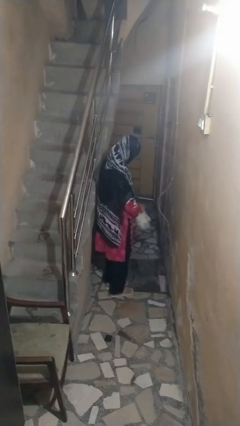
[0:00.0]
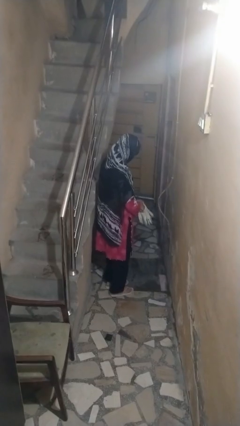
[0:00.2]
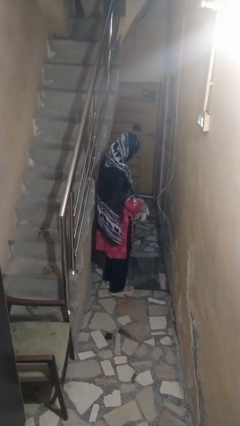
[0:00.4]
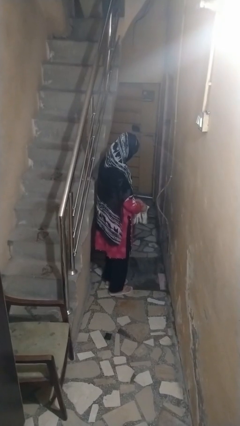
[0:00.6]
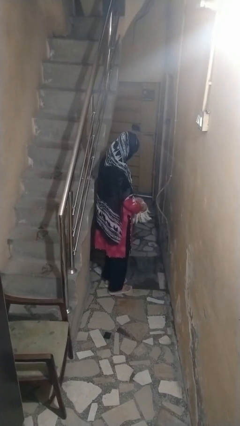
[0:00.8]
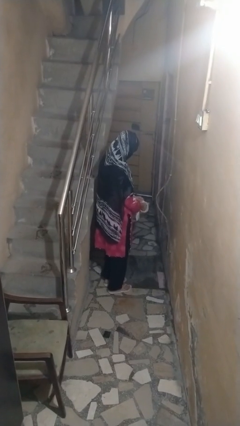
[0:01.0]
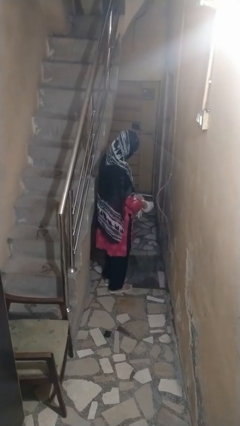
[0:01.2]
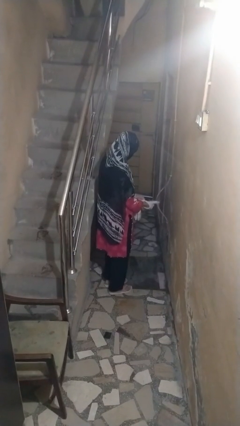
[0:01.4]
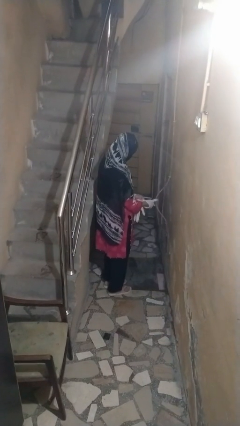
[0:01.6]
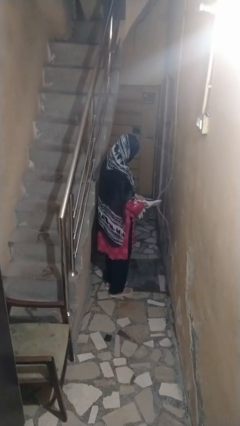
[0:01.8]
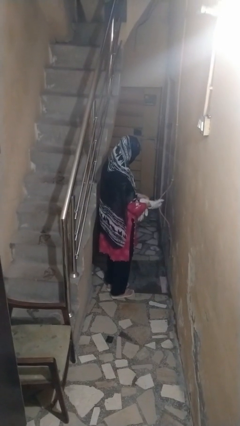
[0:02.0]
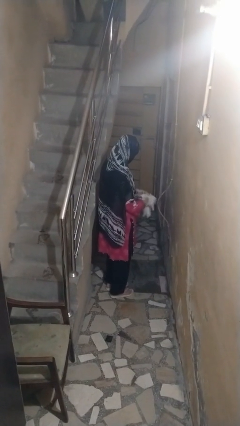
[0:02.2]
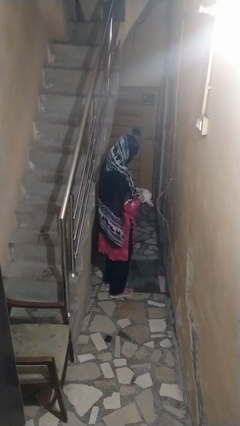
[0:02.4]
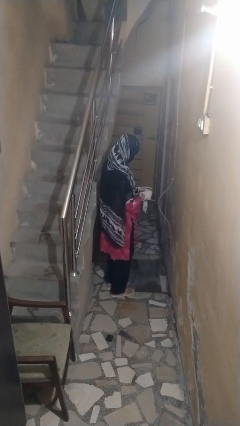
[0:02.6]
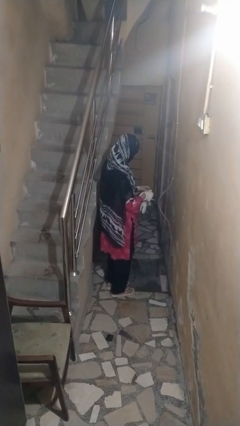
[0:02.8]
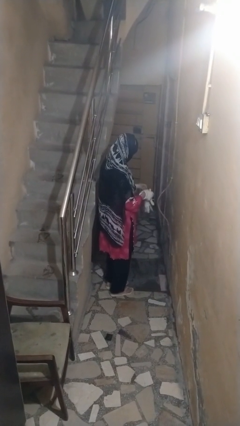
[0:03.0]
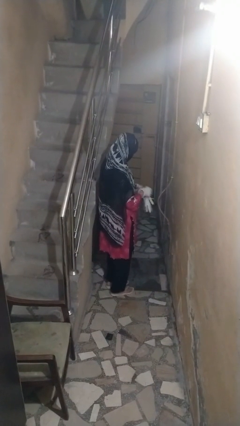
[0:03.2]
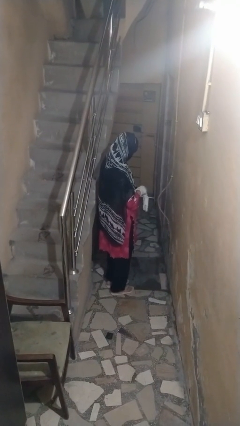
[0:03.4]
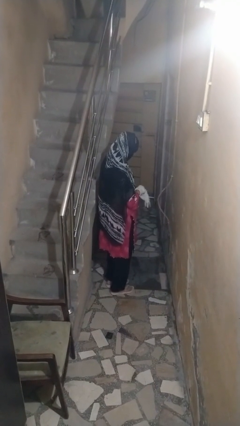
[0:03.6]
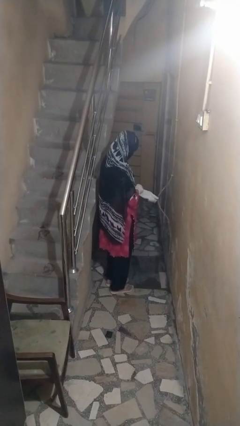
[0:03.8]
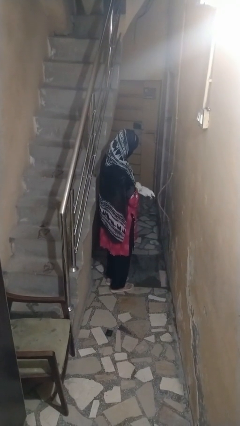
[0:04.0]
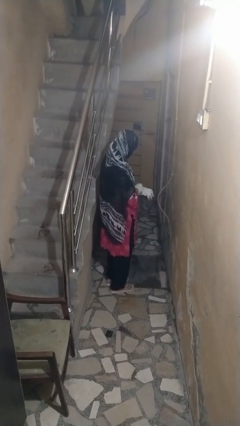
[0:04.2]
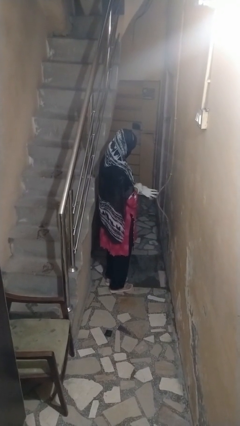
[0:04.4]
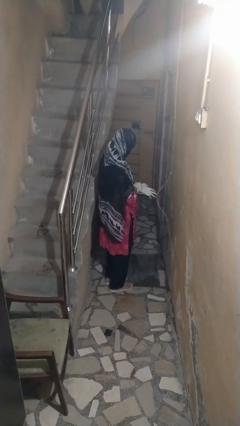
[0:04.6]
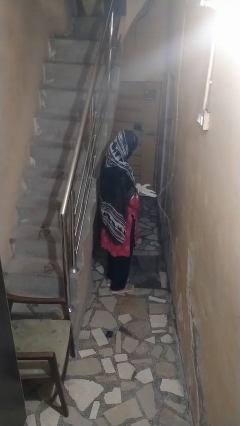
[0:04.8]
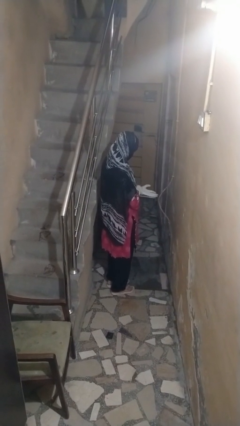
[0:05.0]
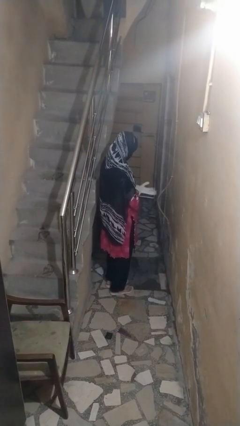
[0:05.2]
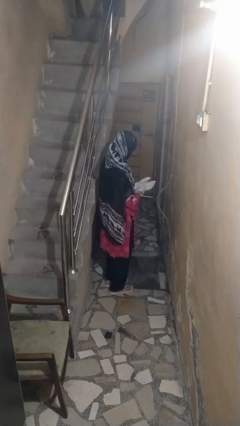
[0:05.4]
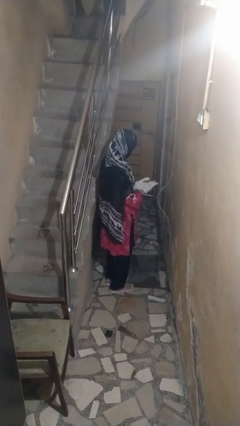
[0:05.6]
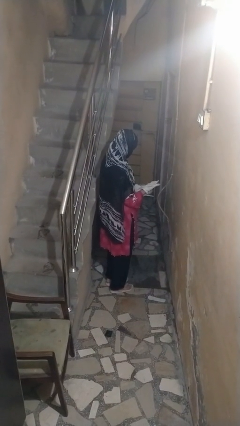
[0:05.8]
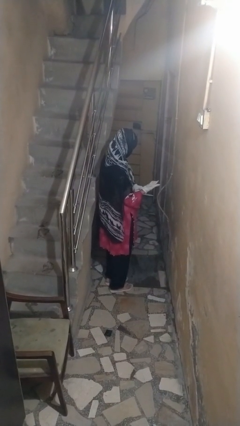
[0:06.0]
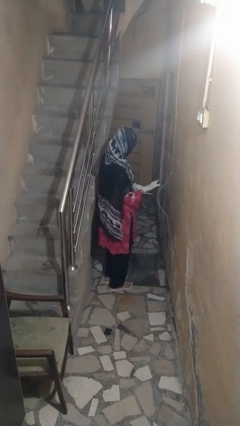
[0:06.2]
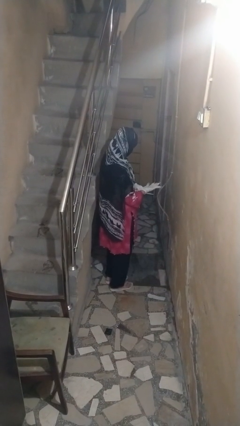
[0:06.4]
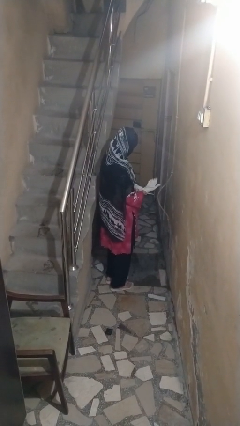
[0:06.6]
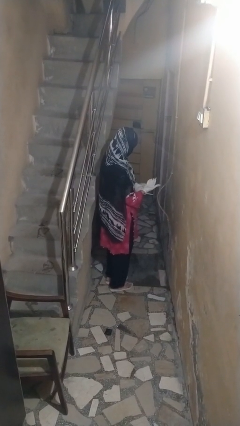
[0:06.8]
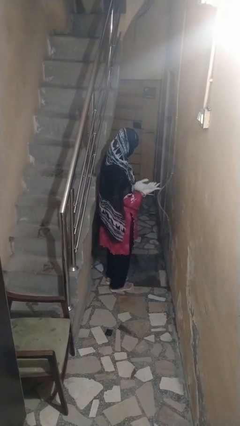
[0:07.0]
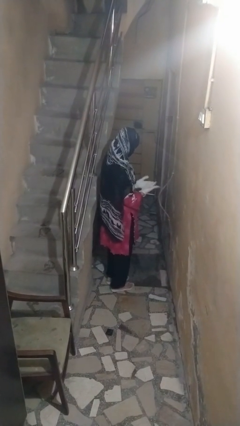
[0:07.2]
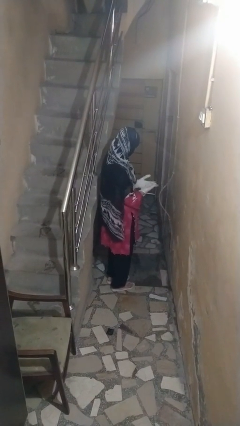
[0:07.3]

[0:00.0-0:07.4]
person puts on gloves

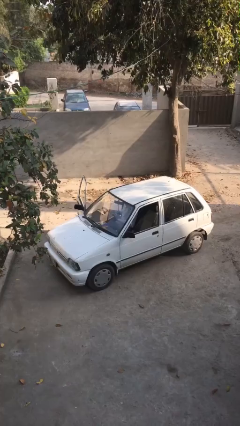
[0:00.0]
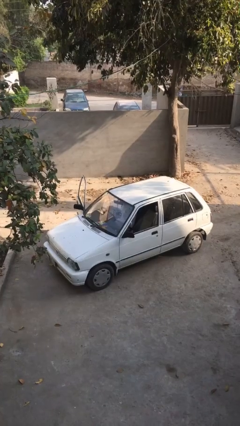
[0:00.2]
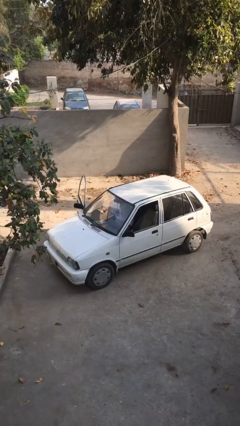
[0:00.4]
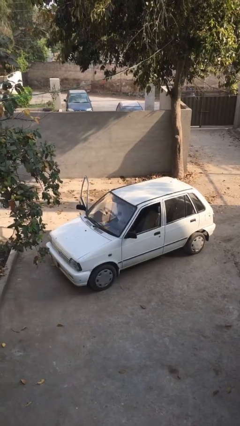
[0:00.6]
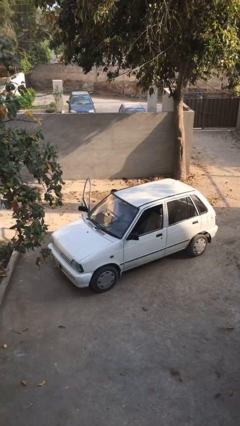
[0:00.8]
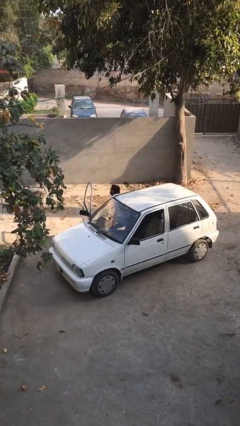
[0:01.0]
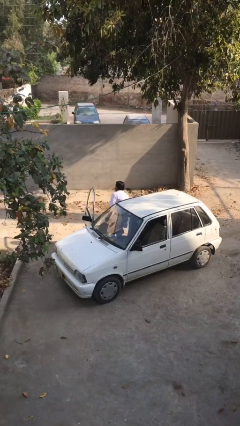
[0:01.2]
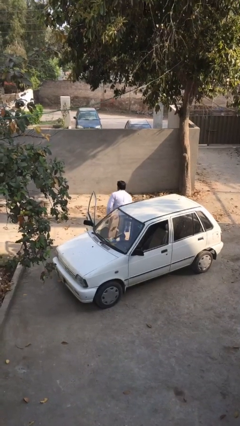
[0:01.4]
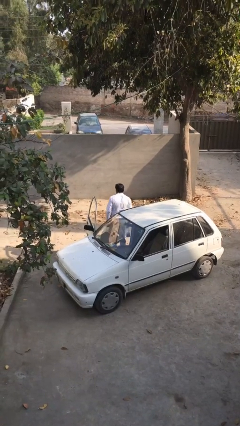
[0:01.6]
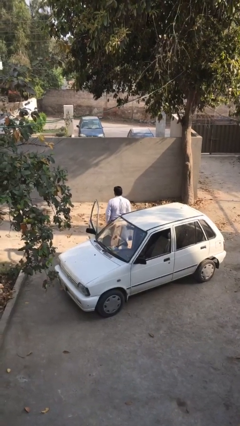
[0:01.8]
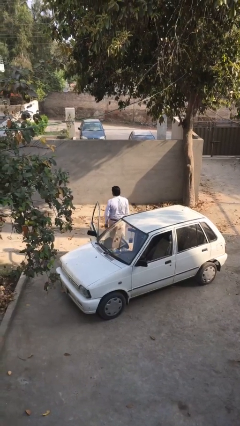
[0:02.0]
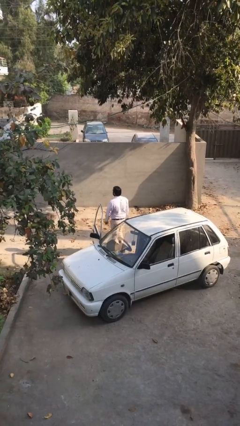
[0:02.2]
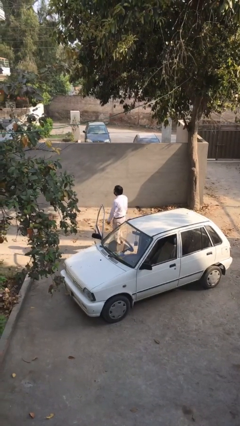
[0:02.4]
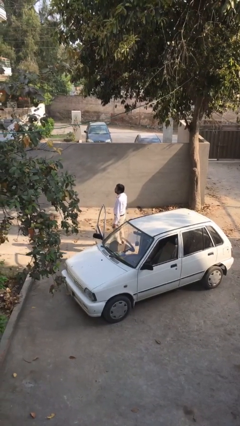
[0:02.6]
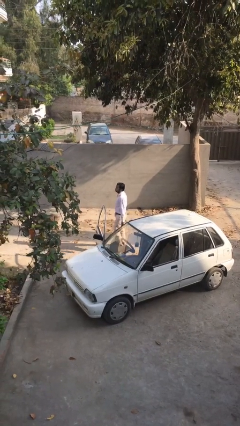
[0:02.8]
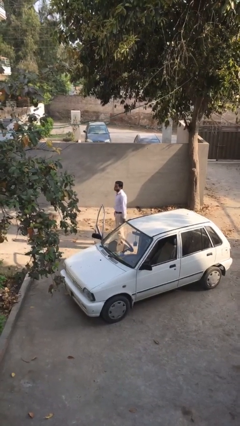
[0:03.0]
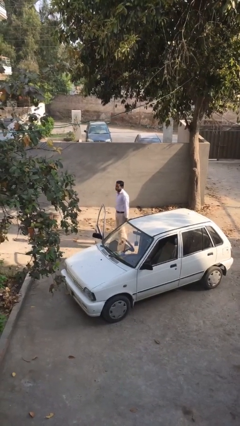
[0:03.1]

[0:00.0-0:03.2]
person exits car

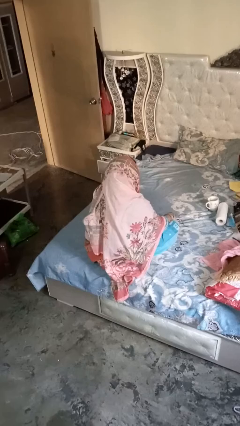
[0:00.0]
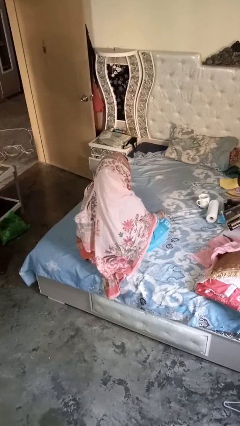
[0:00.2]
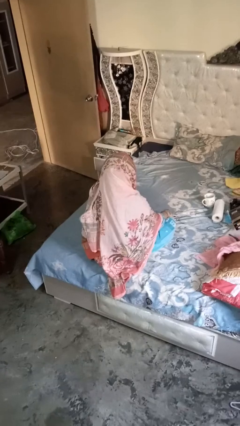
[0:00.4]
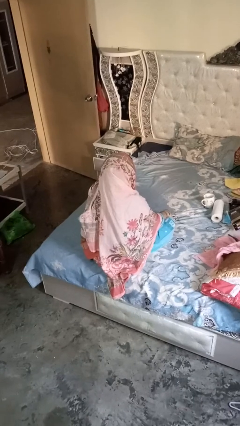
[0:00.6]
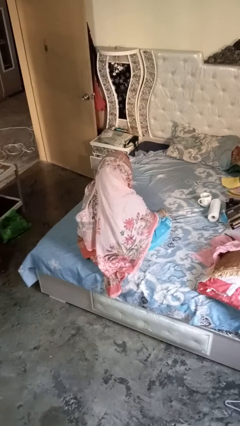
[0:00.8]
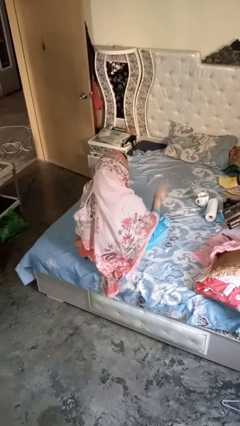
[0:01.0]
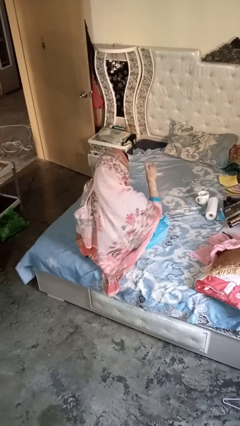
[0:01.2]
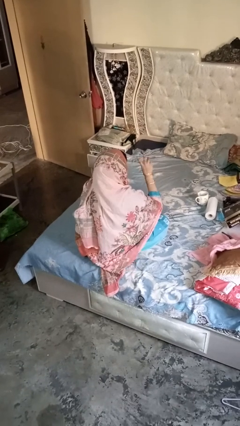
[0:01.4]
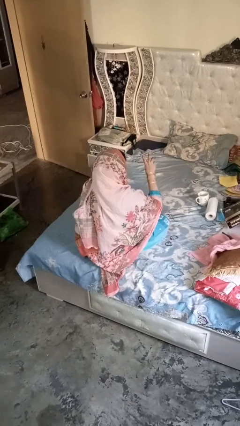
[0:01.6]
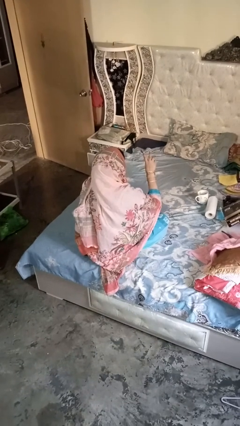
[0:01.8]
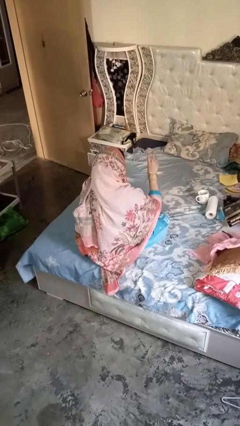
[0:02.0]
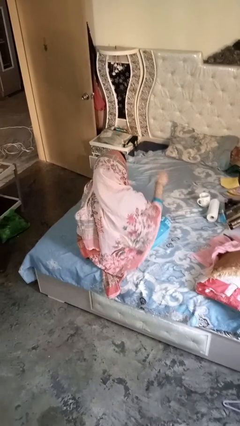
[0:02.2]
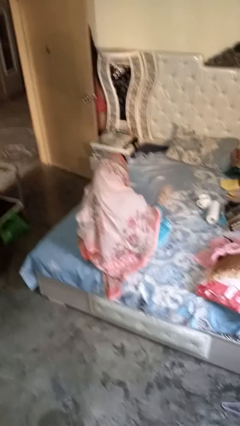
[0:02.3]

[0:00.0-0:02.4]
person gestures be quiet

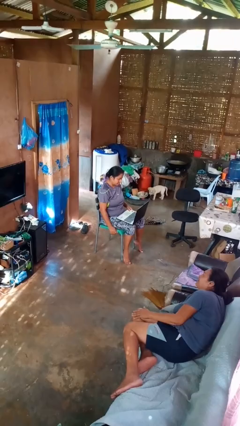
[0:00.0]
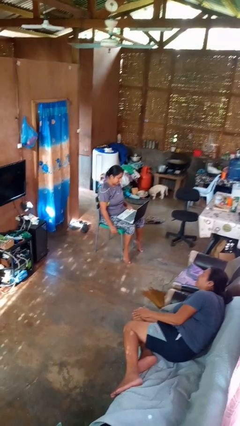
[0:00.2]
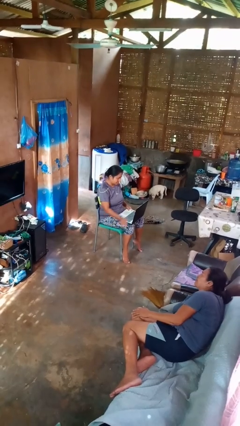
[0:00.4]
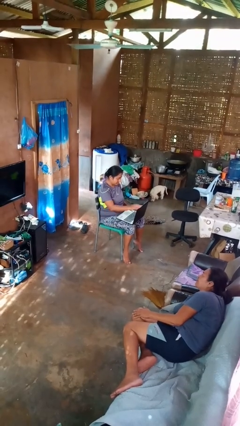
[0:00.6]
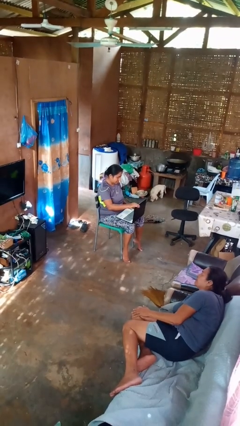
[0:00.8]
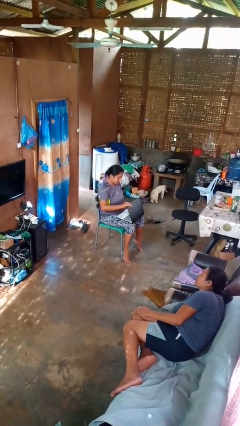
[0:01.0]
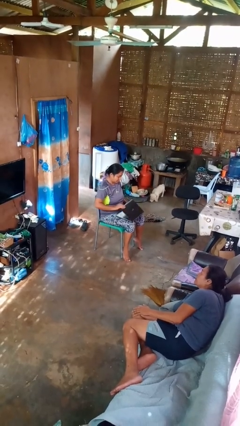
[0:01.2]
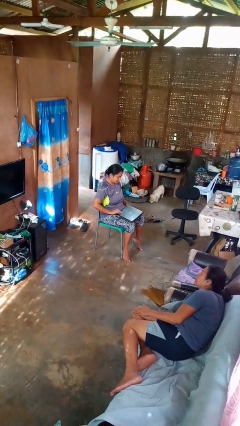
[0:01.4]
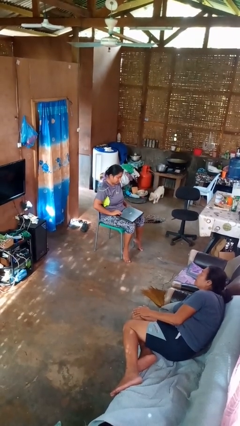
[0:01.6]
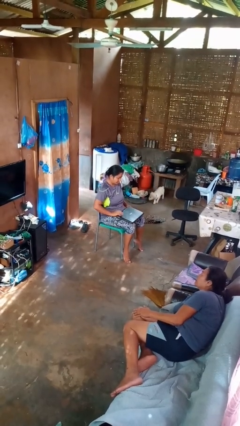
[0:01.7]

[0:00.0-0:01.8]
person closes laptop

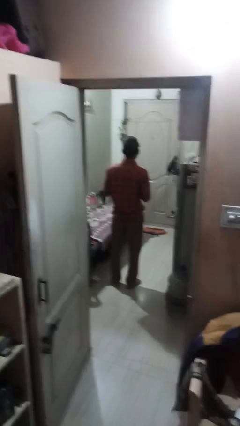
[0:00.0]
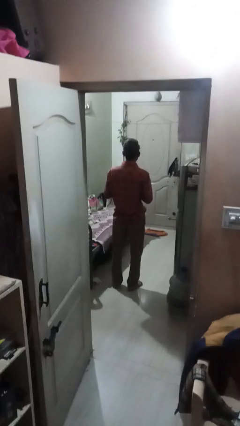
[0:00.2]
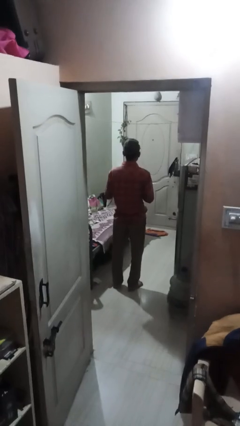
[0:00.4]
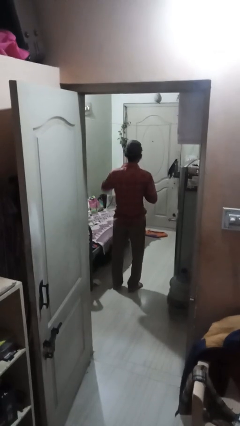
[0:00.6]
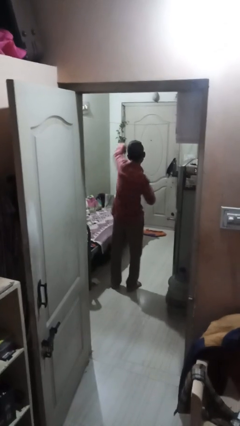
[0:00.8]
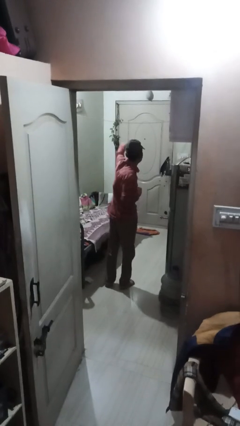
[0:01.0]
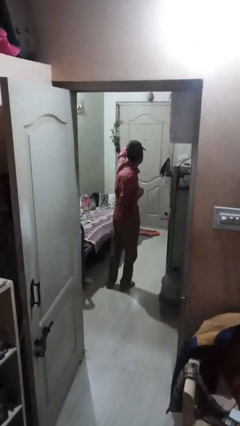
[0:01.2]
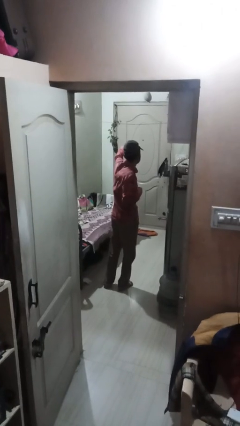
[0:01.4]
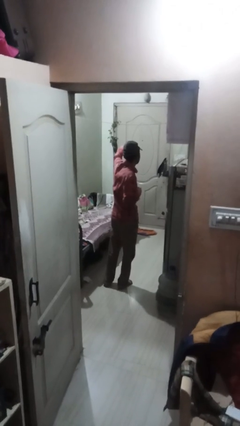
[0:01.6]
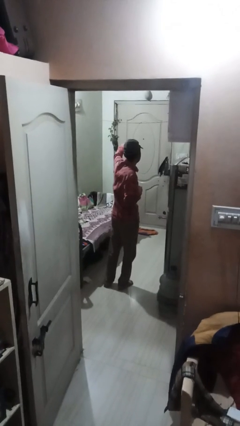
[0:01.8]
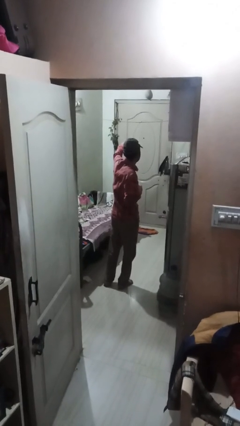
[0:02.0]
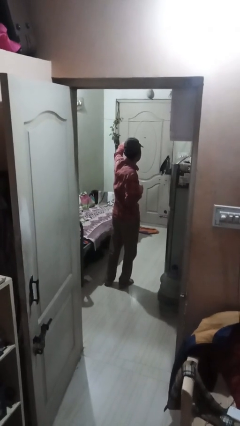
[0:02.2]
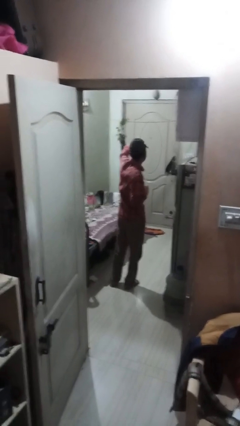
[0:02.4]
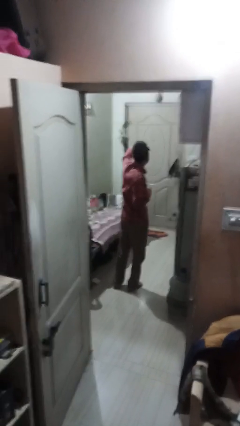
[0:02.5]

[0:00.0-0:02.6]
person punches
